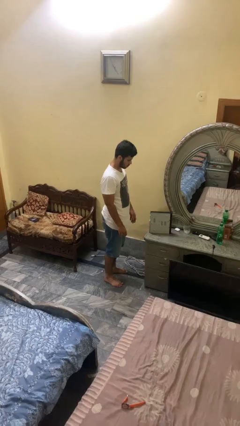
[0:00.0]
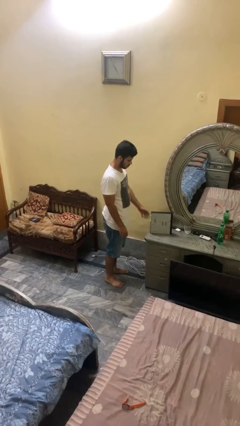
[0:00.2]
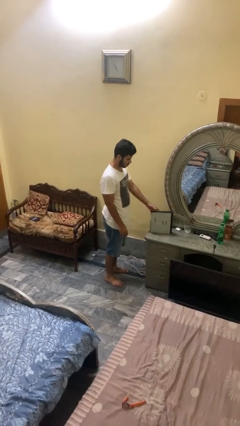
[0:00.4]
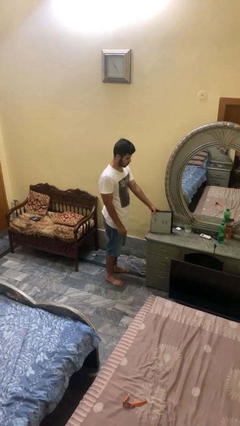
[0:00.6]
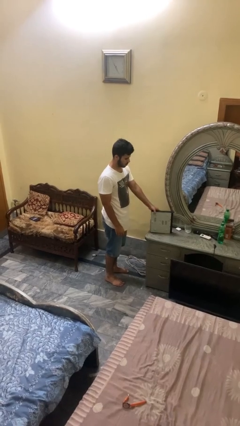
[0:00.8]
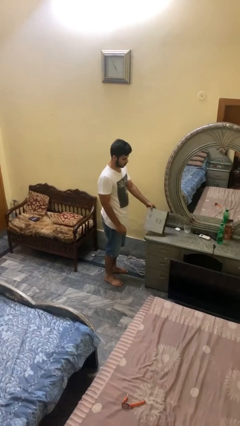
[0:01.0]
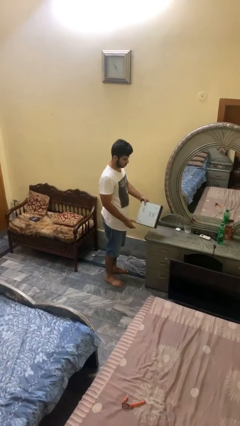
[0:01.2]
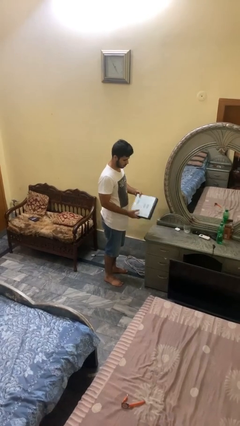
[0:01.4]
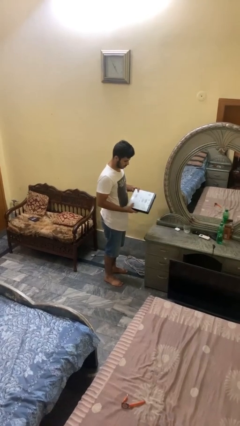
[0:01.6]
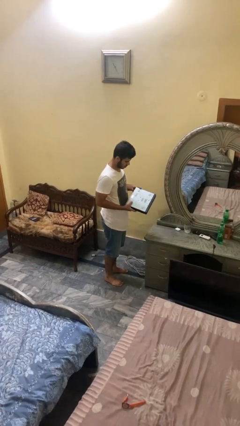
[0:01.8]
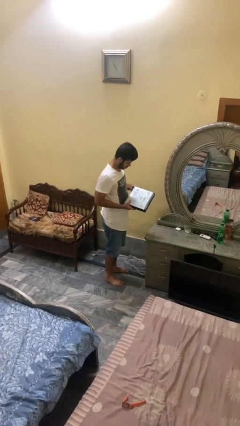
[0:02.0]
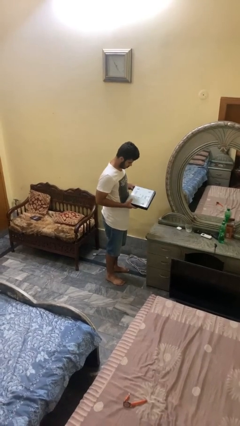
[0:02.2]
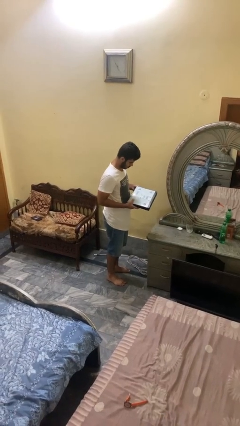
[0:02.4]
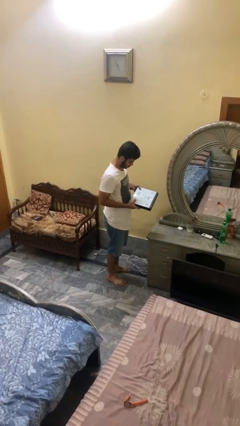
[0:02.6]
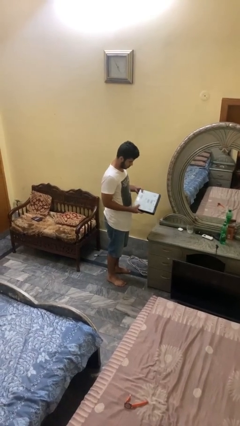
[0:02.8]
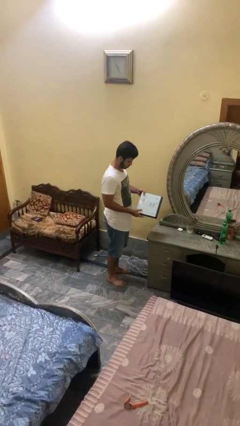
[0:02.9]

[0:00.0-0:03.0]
person picks up object from countertop

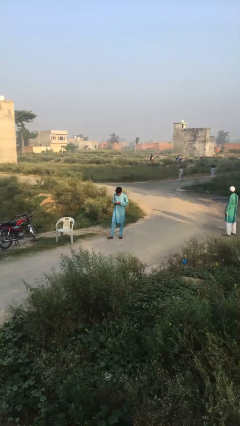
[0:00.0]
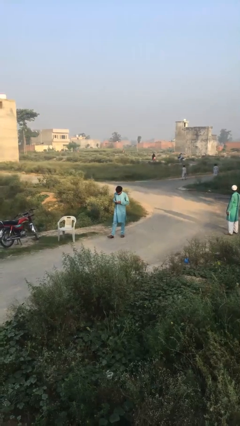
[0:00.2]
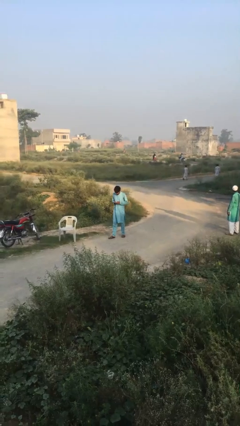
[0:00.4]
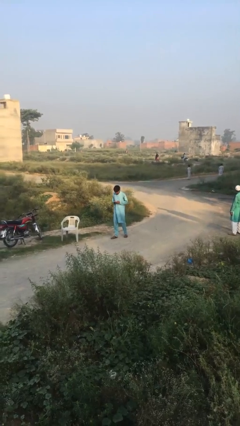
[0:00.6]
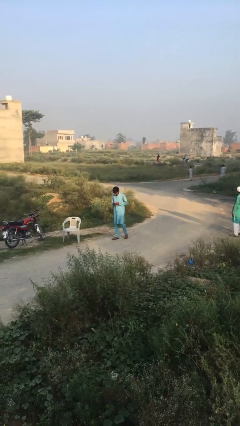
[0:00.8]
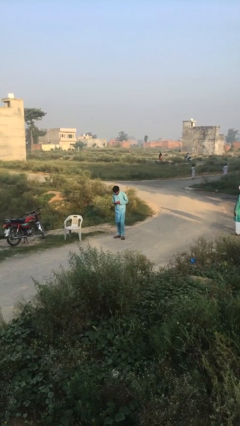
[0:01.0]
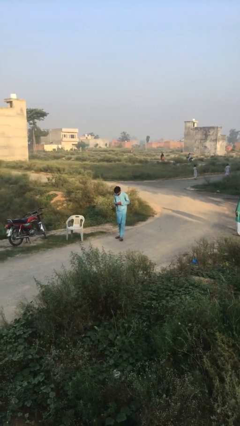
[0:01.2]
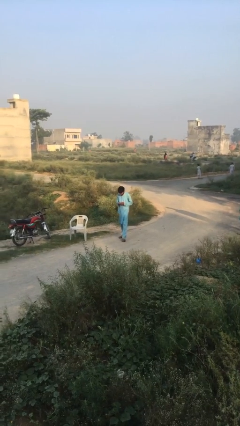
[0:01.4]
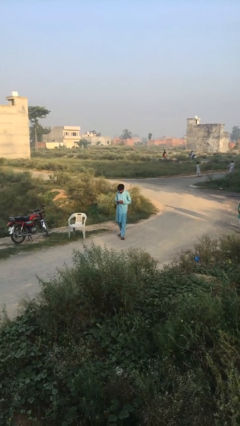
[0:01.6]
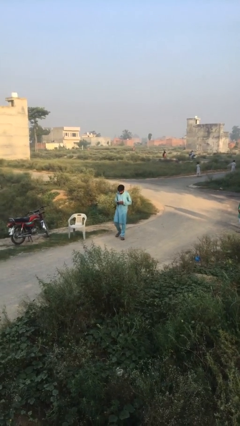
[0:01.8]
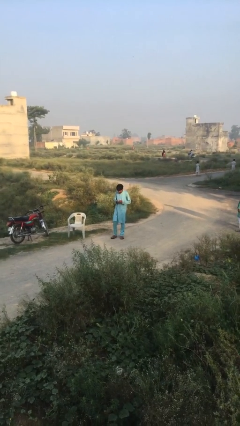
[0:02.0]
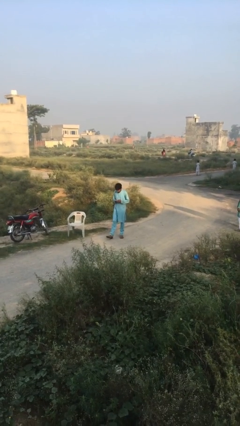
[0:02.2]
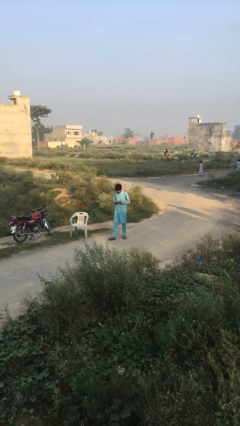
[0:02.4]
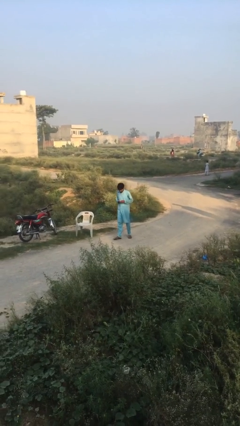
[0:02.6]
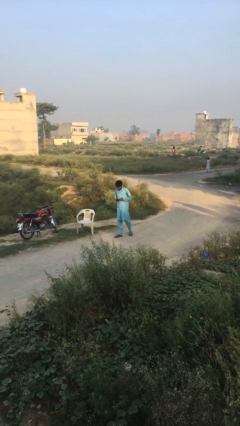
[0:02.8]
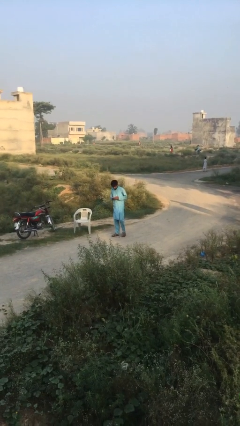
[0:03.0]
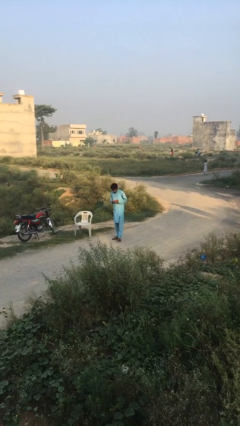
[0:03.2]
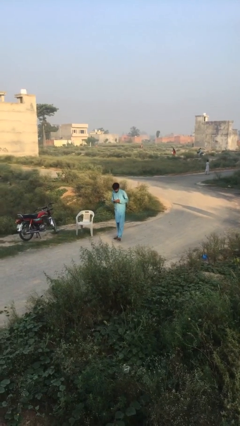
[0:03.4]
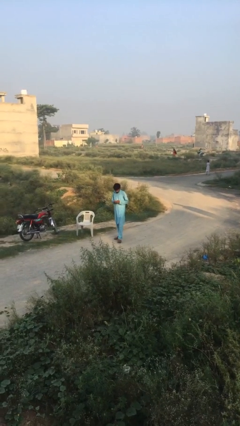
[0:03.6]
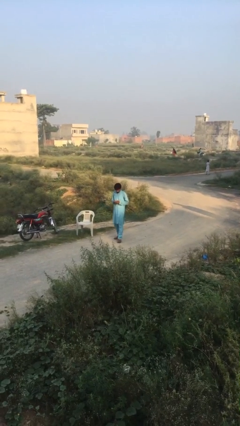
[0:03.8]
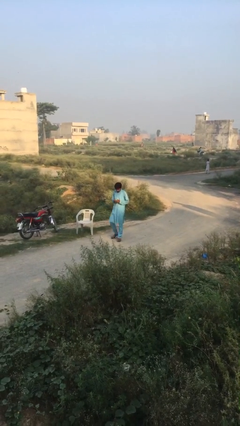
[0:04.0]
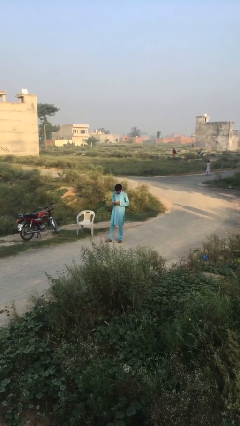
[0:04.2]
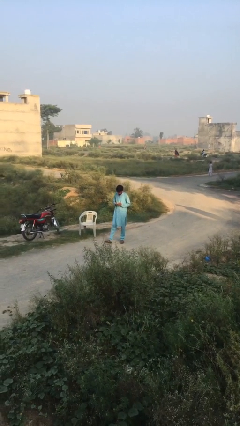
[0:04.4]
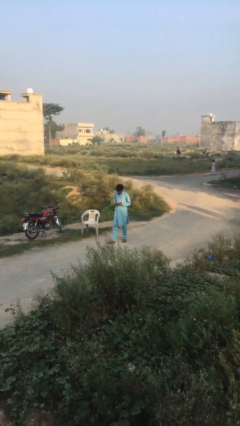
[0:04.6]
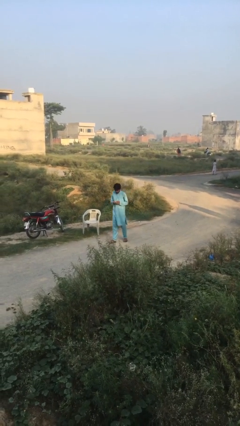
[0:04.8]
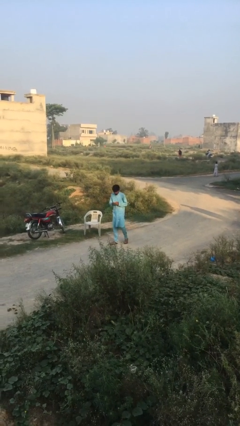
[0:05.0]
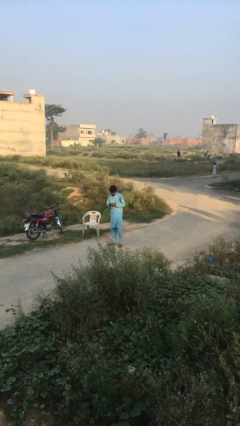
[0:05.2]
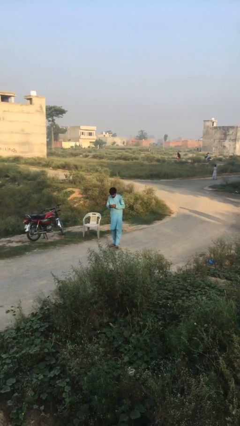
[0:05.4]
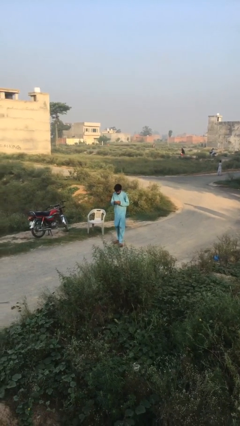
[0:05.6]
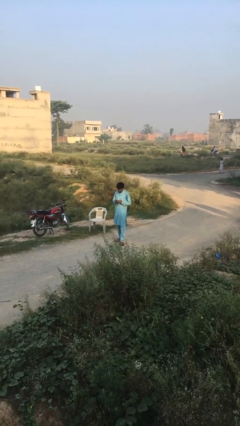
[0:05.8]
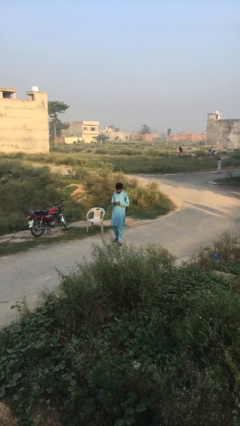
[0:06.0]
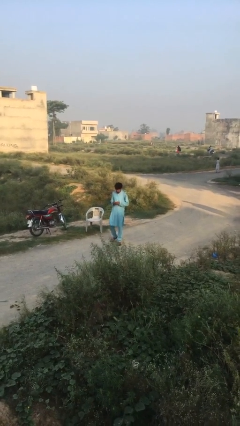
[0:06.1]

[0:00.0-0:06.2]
person texts on phone

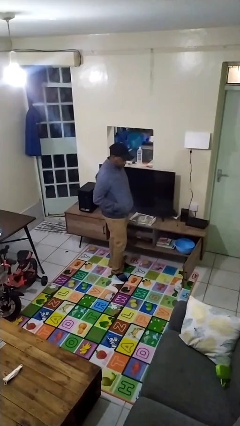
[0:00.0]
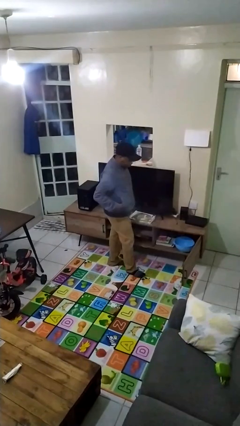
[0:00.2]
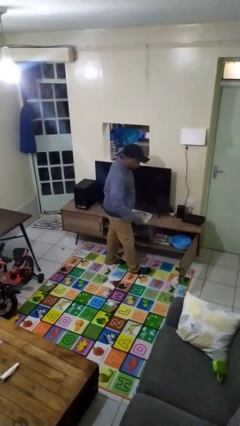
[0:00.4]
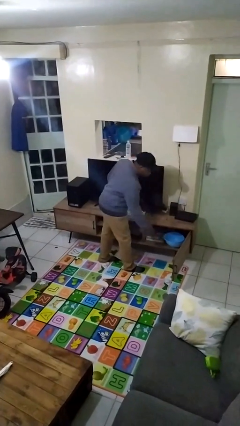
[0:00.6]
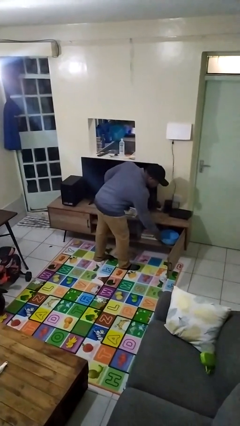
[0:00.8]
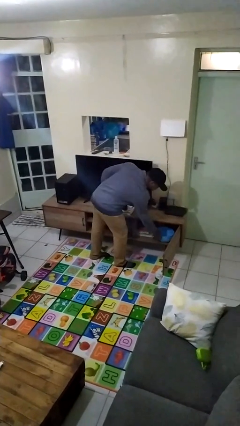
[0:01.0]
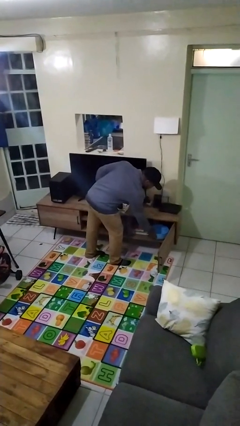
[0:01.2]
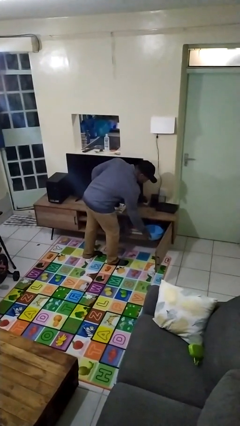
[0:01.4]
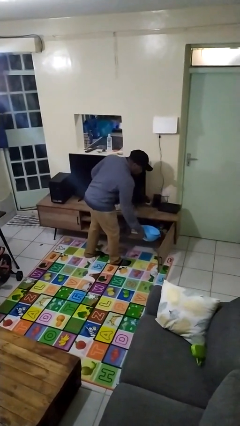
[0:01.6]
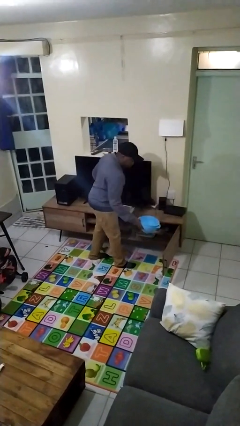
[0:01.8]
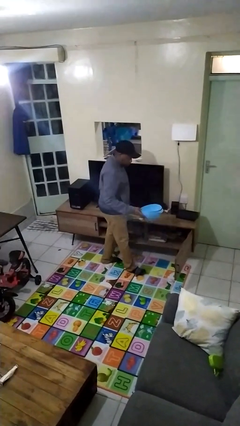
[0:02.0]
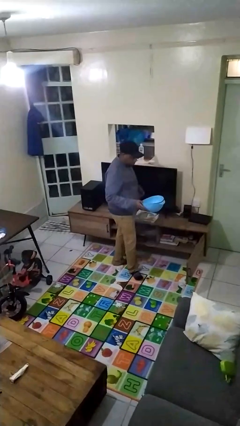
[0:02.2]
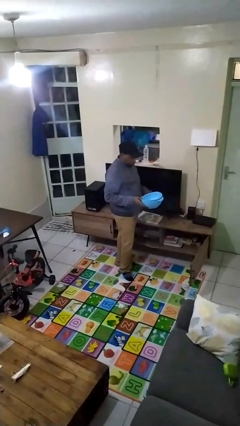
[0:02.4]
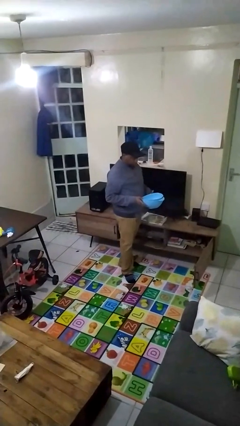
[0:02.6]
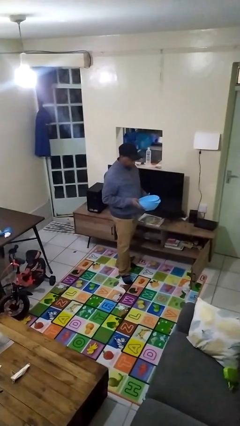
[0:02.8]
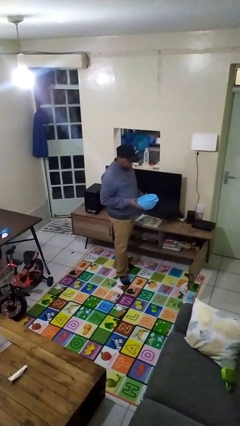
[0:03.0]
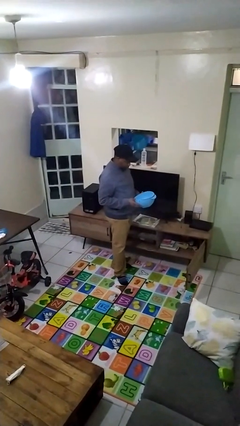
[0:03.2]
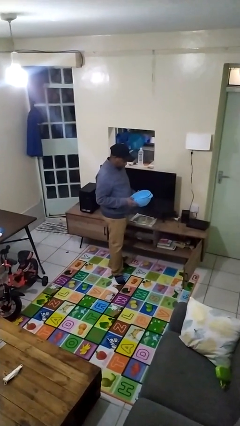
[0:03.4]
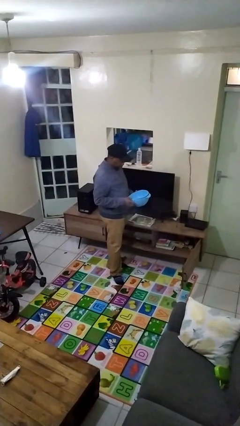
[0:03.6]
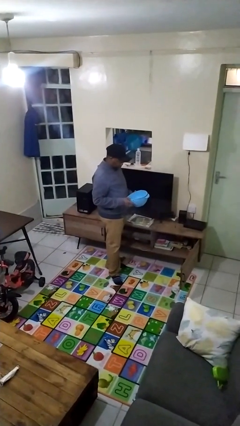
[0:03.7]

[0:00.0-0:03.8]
person picks up object from cabinet

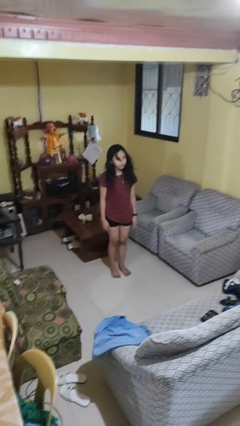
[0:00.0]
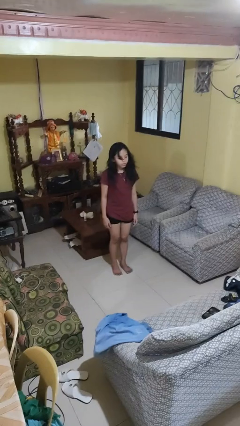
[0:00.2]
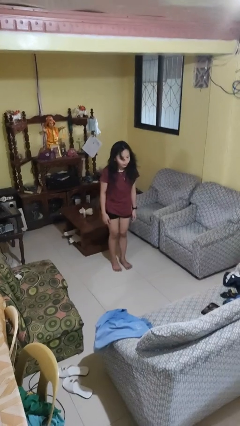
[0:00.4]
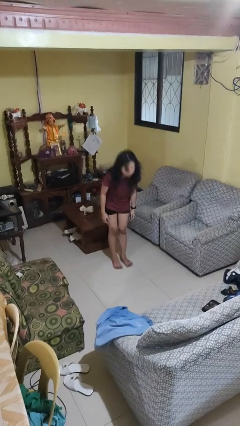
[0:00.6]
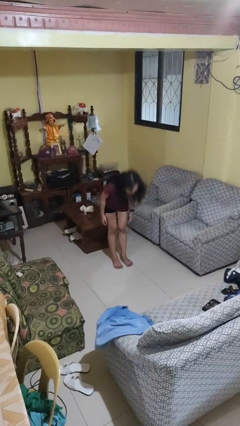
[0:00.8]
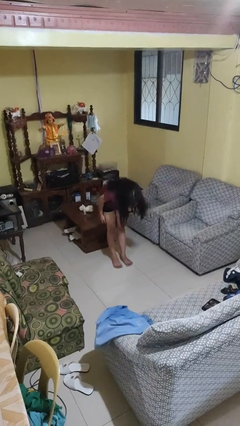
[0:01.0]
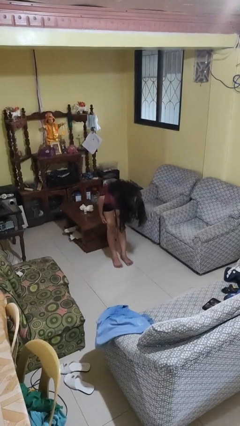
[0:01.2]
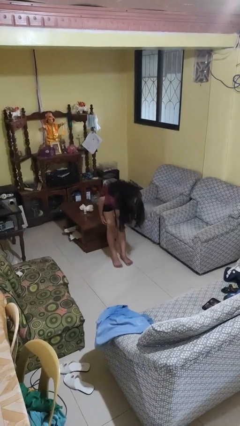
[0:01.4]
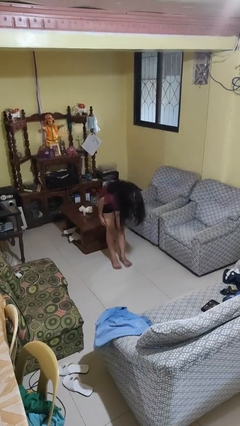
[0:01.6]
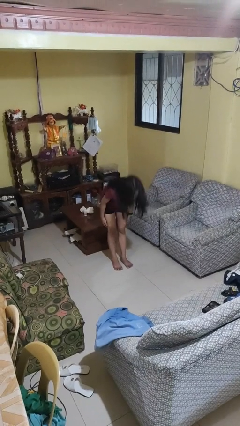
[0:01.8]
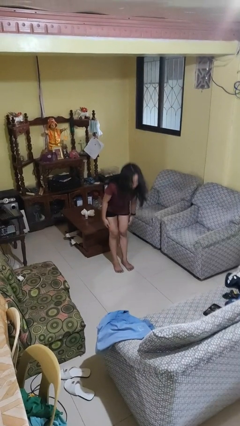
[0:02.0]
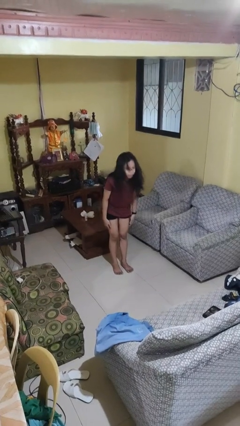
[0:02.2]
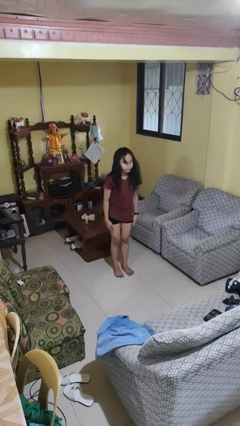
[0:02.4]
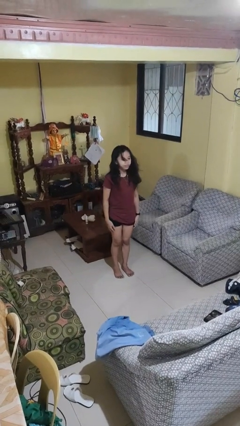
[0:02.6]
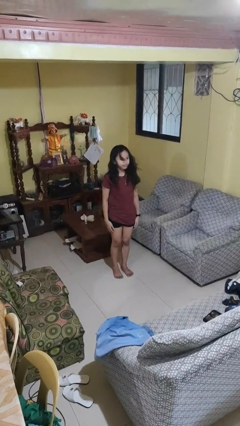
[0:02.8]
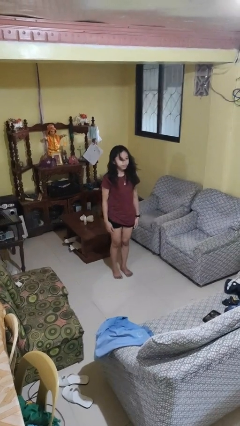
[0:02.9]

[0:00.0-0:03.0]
person bows

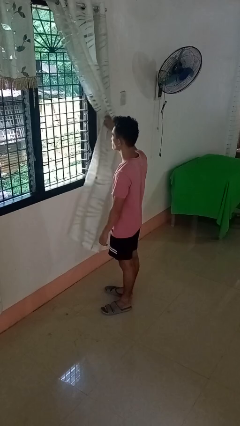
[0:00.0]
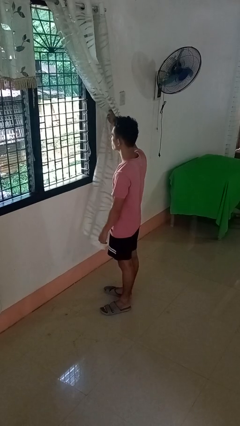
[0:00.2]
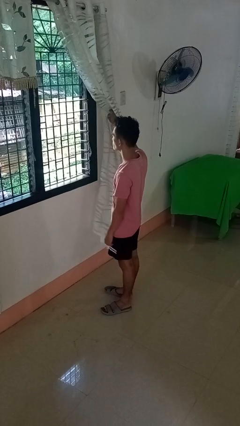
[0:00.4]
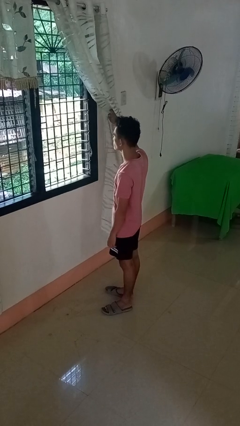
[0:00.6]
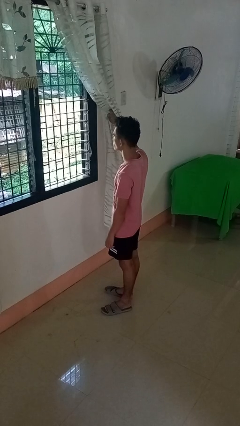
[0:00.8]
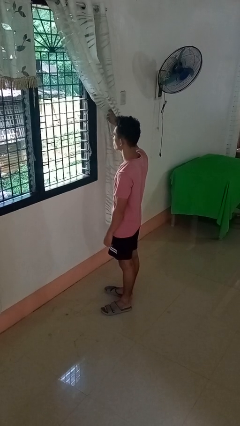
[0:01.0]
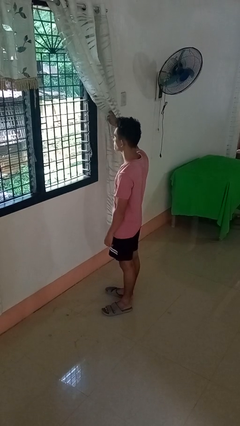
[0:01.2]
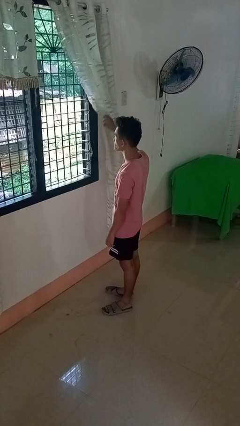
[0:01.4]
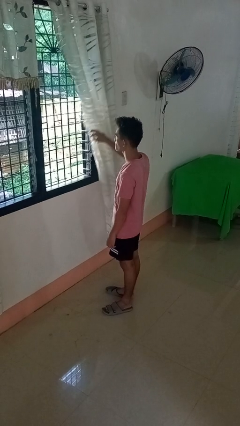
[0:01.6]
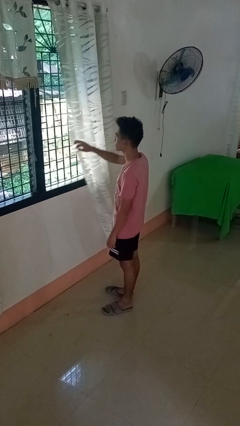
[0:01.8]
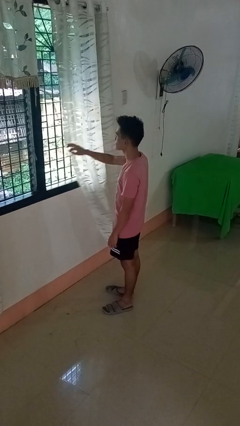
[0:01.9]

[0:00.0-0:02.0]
person opens curtains
